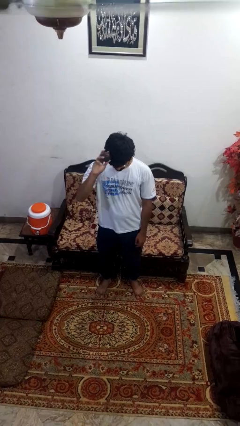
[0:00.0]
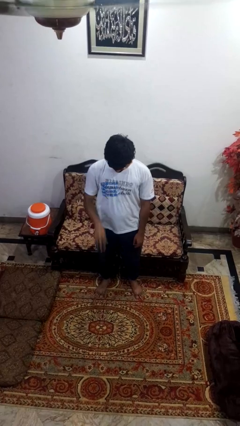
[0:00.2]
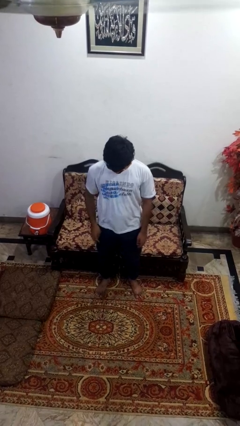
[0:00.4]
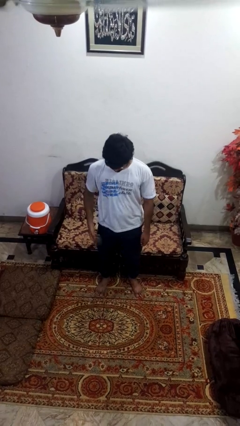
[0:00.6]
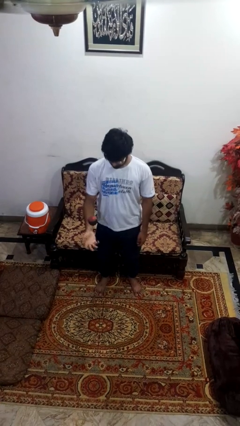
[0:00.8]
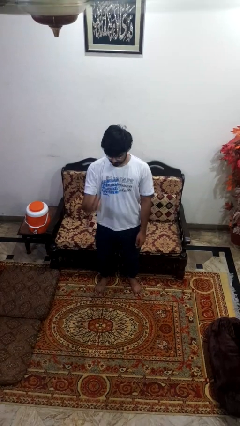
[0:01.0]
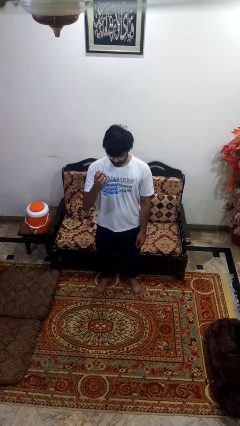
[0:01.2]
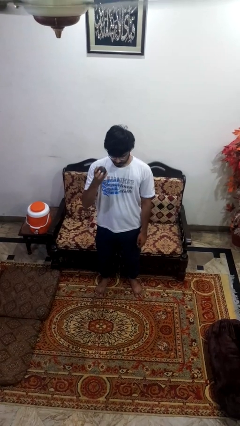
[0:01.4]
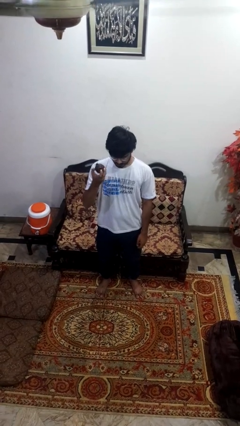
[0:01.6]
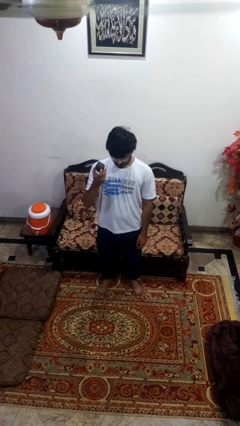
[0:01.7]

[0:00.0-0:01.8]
person bounces ball on floor

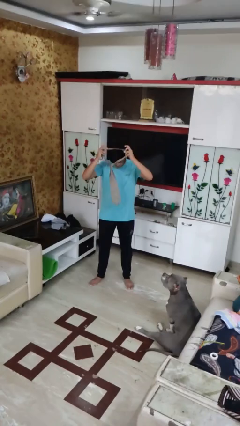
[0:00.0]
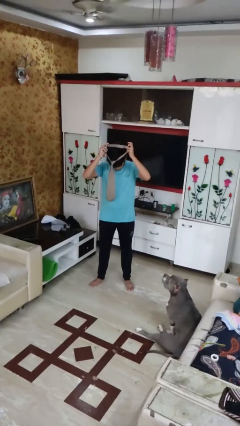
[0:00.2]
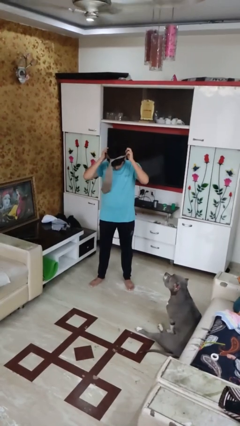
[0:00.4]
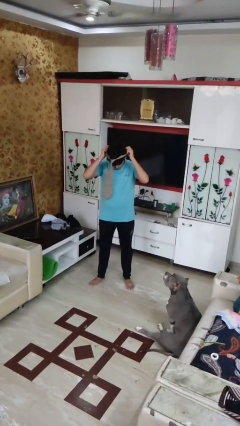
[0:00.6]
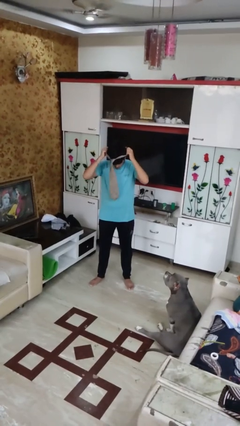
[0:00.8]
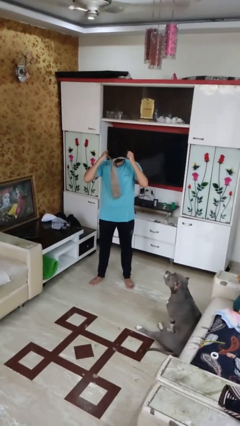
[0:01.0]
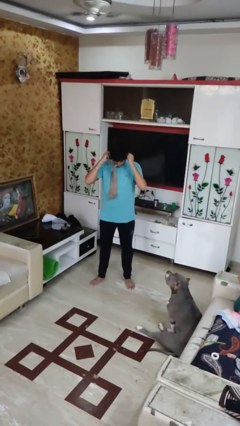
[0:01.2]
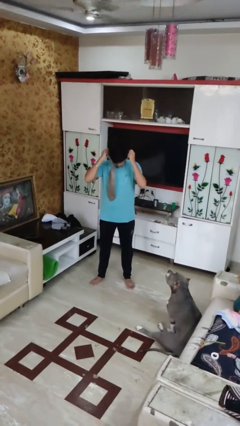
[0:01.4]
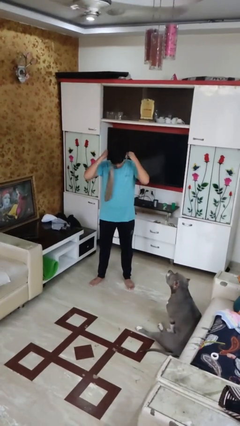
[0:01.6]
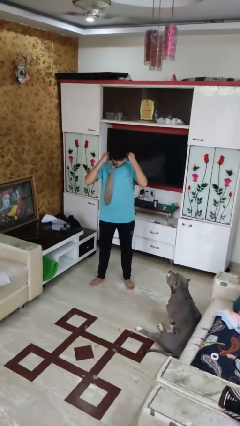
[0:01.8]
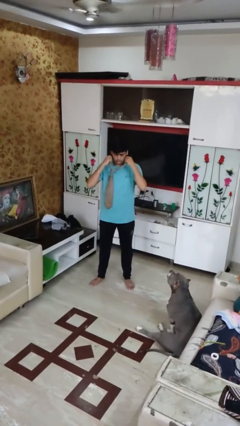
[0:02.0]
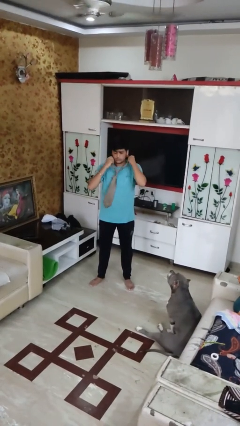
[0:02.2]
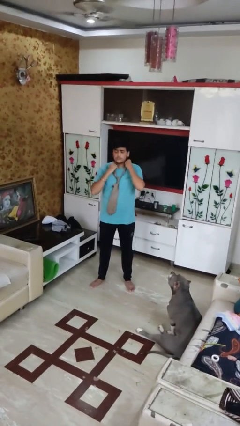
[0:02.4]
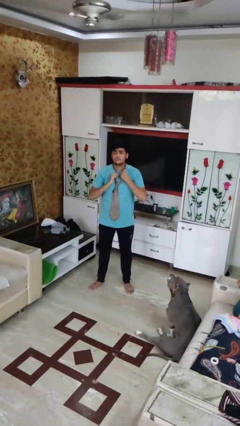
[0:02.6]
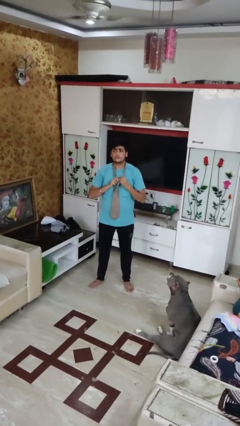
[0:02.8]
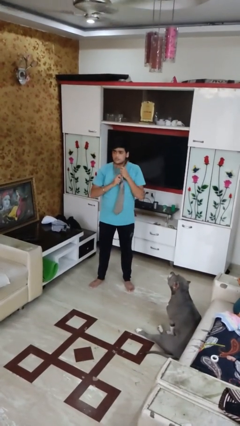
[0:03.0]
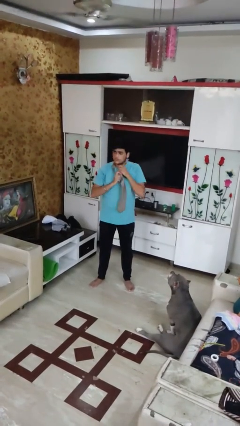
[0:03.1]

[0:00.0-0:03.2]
person puts on necktie

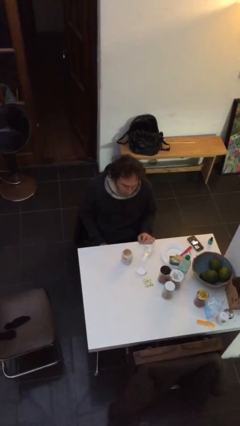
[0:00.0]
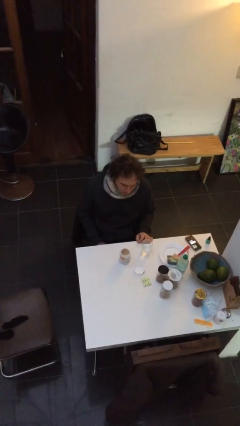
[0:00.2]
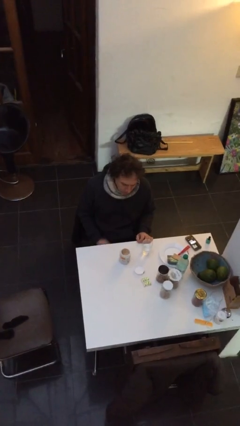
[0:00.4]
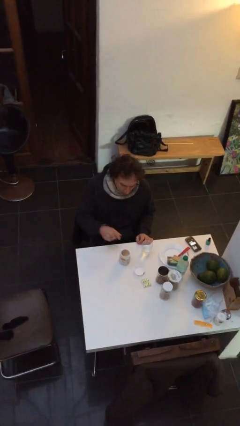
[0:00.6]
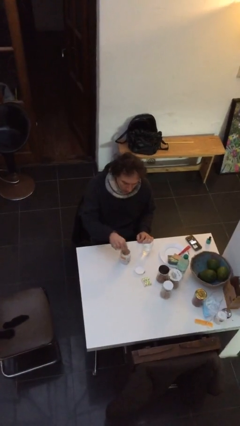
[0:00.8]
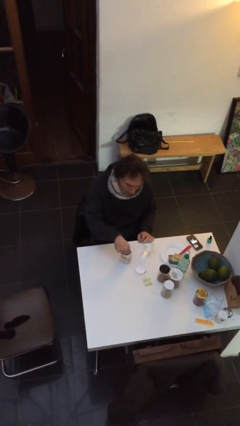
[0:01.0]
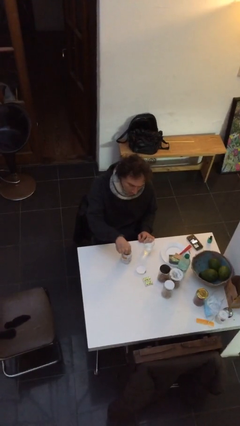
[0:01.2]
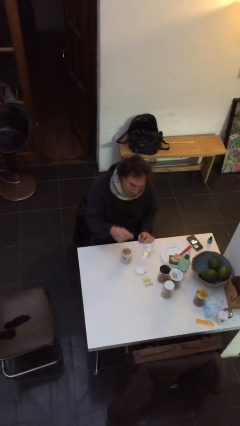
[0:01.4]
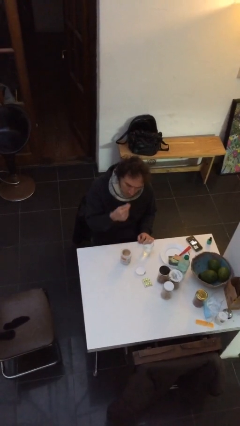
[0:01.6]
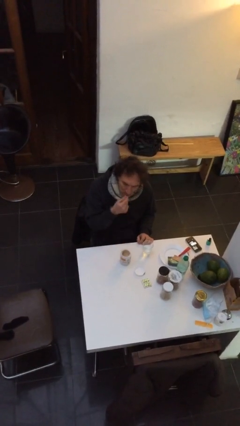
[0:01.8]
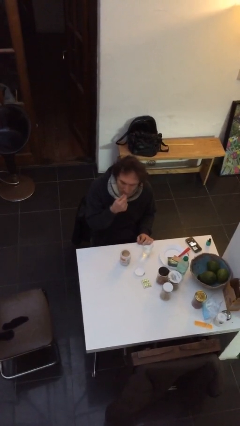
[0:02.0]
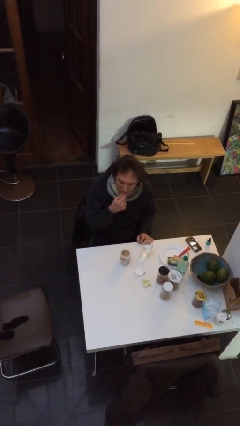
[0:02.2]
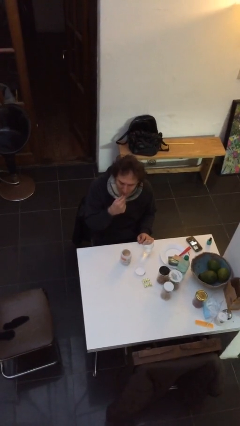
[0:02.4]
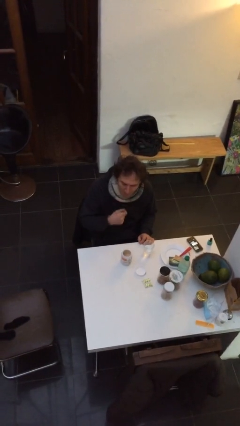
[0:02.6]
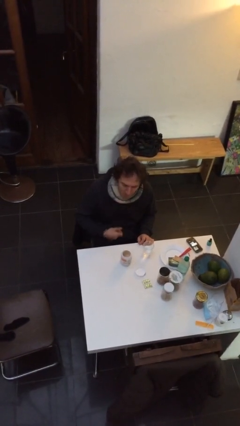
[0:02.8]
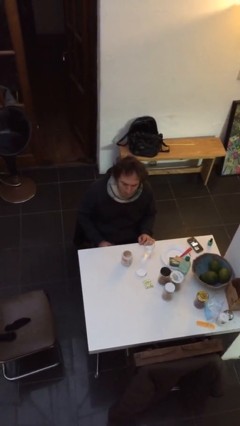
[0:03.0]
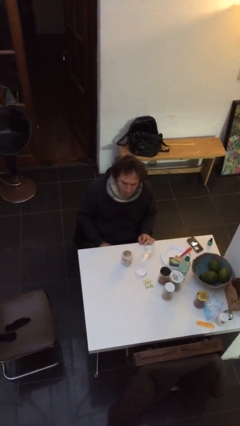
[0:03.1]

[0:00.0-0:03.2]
person takes medicine pills

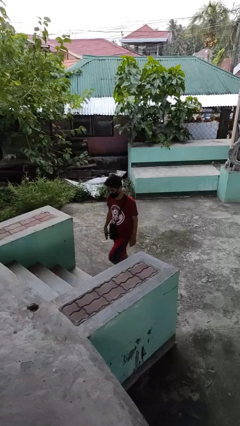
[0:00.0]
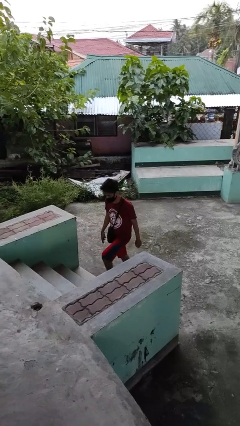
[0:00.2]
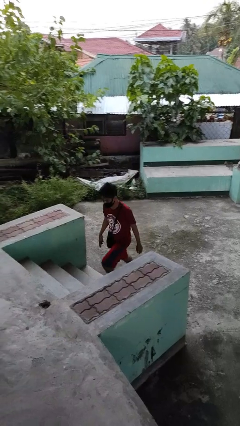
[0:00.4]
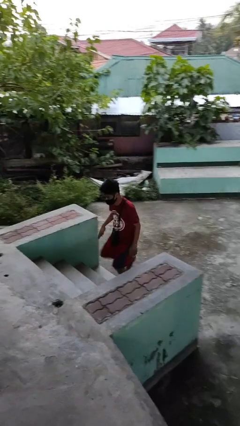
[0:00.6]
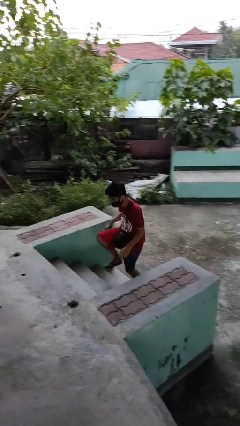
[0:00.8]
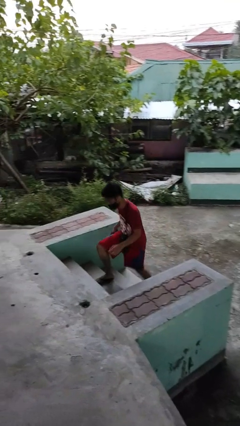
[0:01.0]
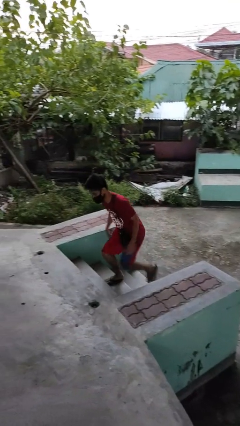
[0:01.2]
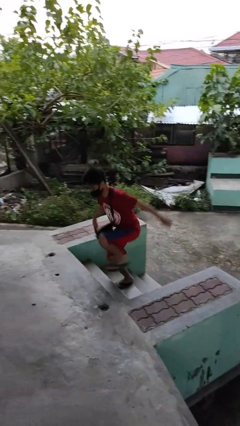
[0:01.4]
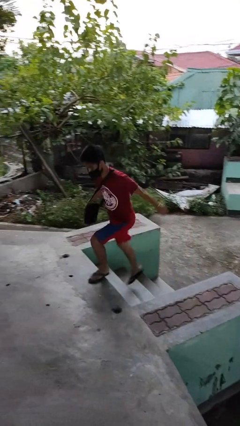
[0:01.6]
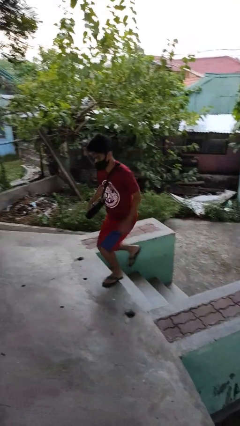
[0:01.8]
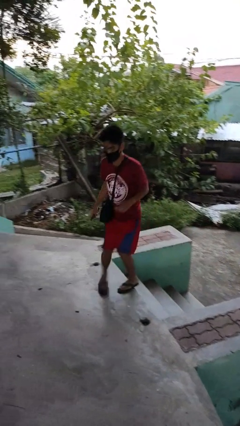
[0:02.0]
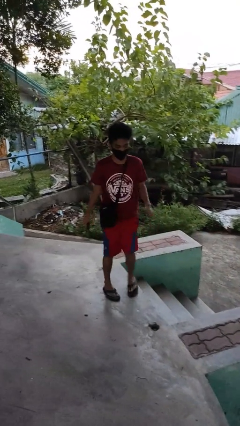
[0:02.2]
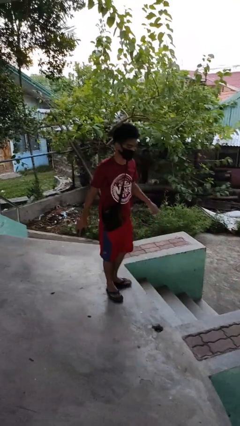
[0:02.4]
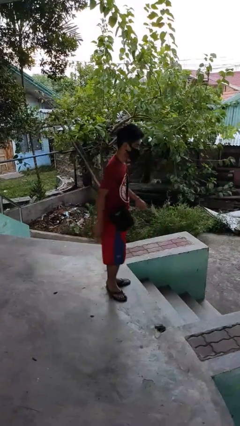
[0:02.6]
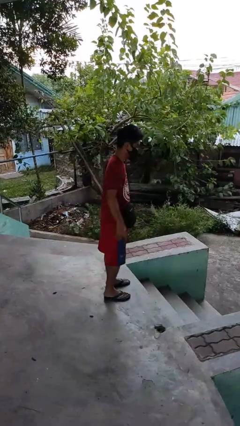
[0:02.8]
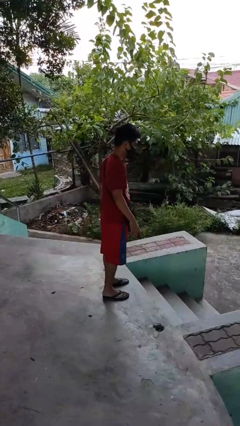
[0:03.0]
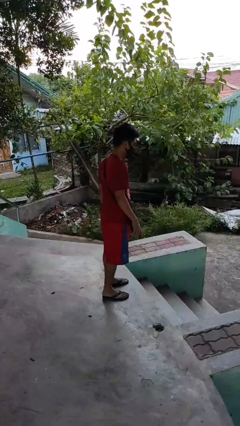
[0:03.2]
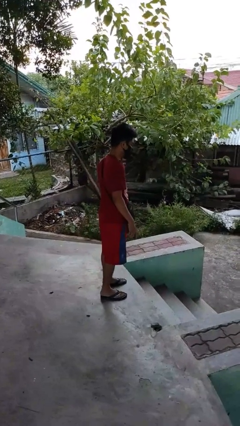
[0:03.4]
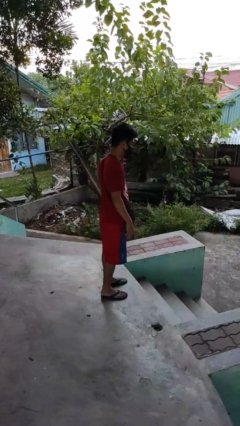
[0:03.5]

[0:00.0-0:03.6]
person climbs up stairs

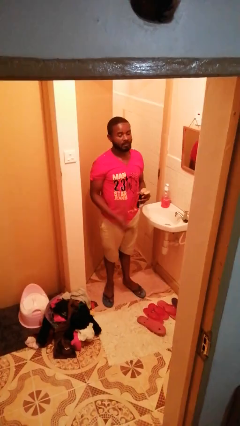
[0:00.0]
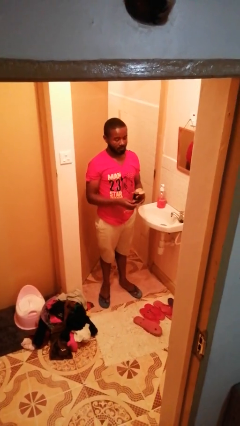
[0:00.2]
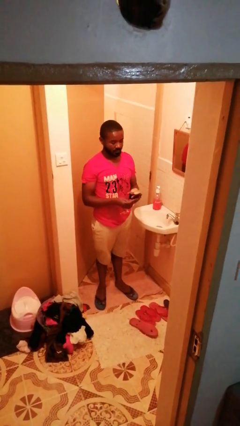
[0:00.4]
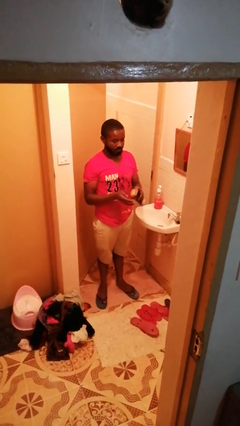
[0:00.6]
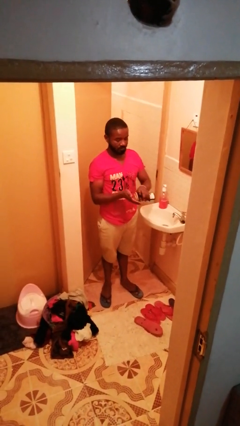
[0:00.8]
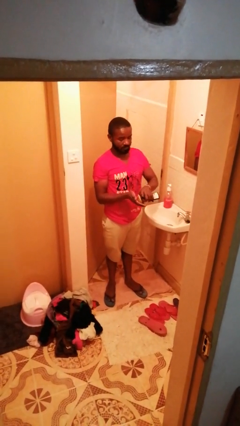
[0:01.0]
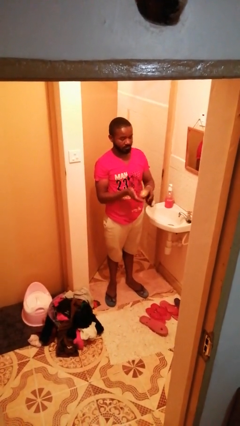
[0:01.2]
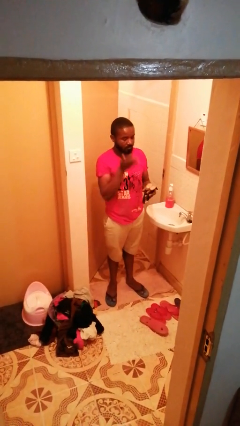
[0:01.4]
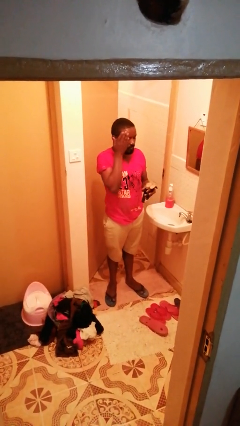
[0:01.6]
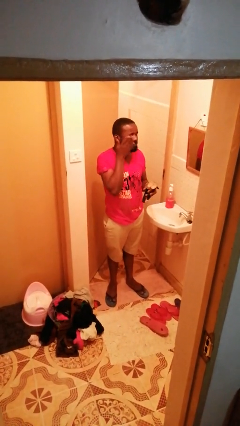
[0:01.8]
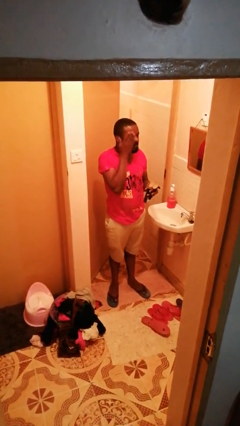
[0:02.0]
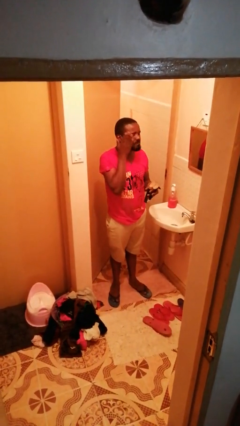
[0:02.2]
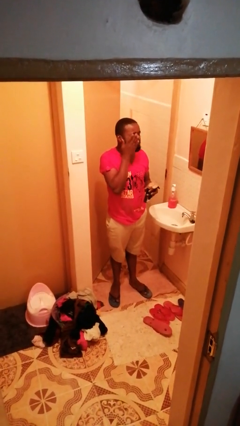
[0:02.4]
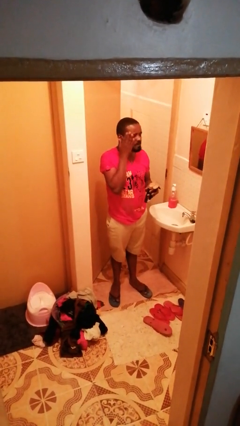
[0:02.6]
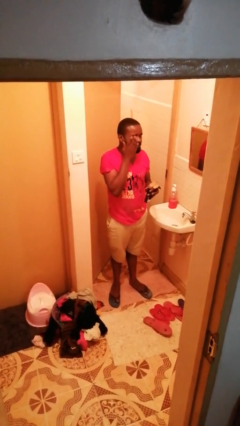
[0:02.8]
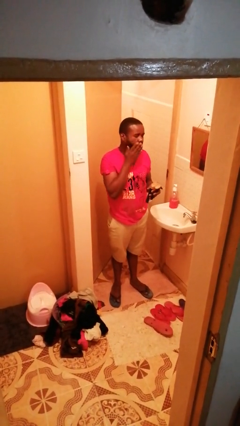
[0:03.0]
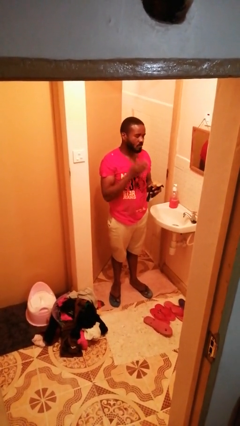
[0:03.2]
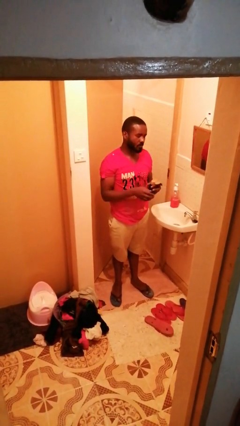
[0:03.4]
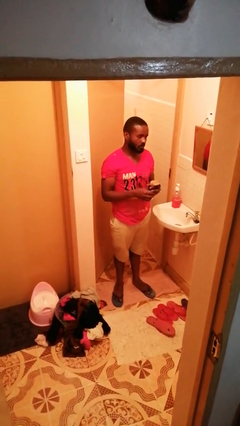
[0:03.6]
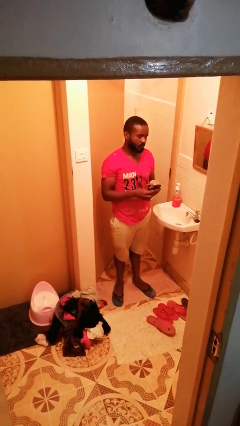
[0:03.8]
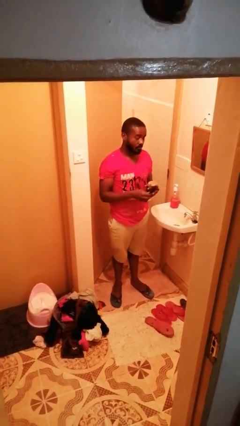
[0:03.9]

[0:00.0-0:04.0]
person applies shaving cream

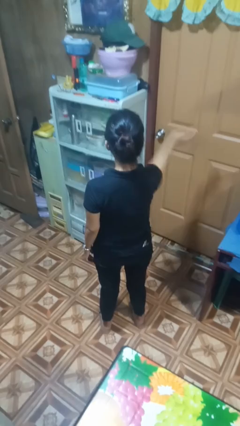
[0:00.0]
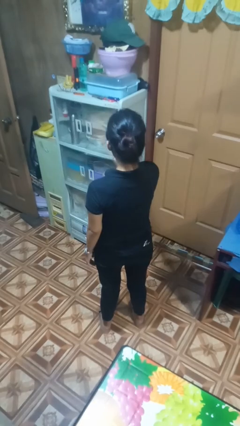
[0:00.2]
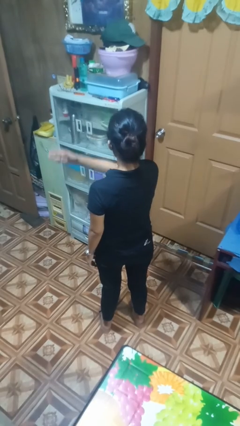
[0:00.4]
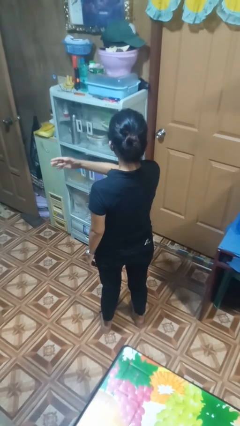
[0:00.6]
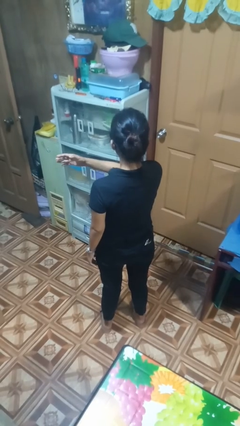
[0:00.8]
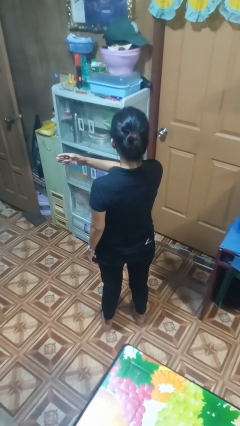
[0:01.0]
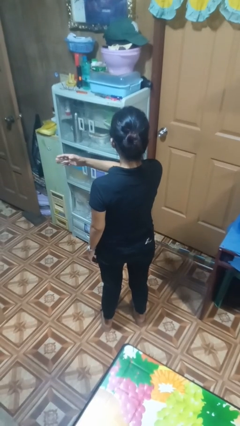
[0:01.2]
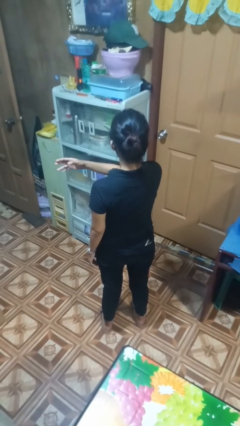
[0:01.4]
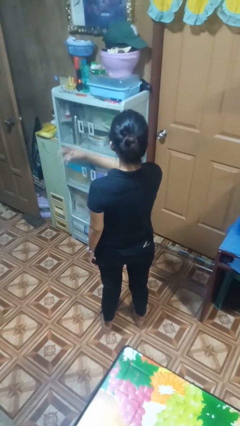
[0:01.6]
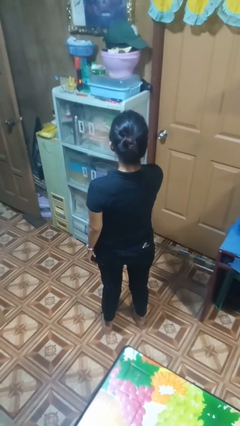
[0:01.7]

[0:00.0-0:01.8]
person gestures swipe left

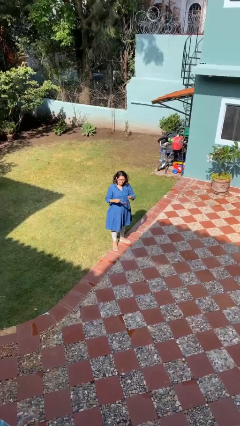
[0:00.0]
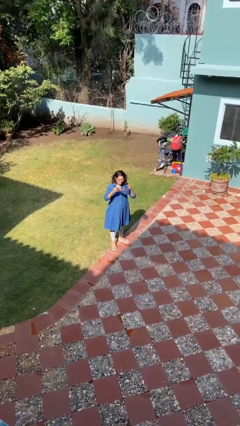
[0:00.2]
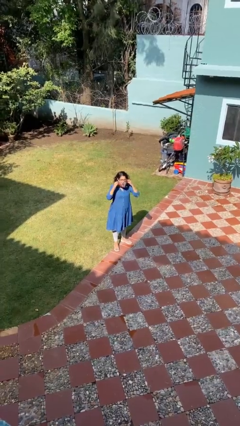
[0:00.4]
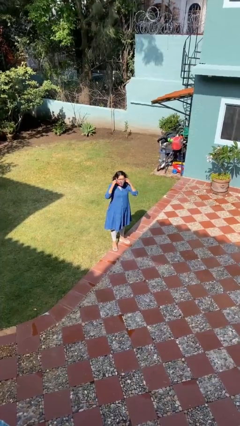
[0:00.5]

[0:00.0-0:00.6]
person puts on facemask
